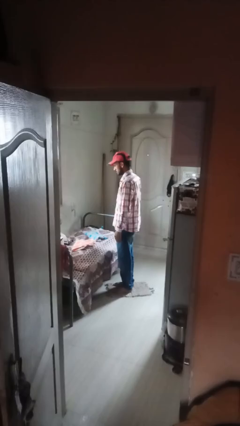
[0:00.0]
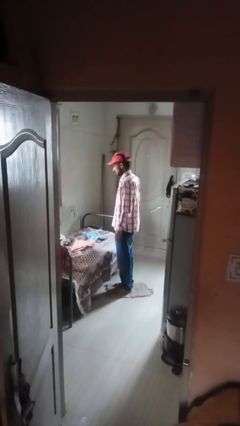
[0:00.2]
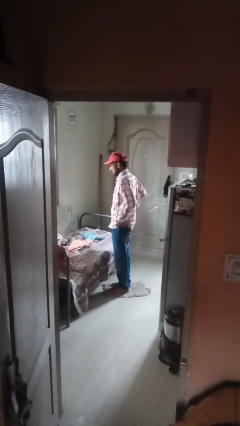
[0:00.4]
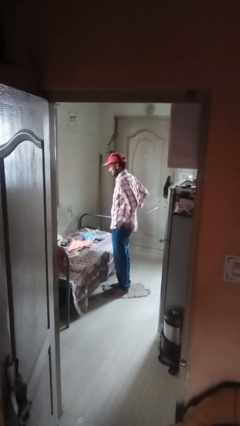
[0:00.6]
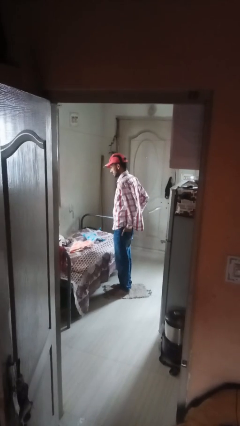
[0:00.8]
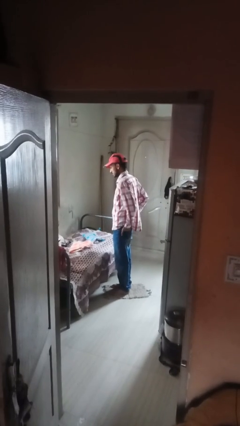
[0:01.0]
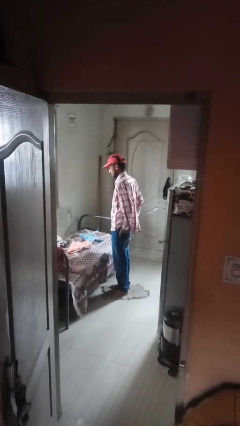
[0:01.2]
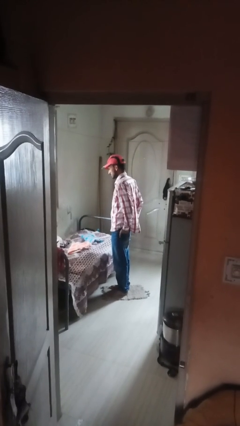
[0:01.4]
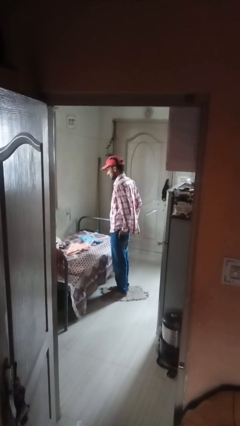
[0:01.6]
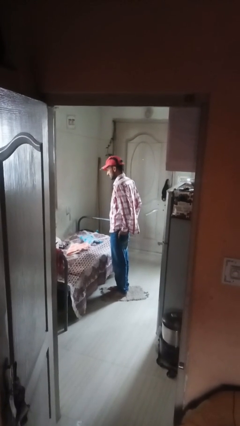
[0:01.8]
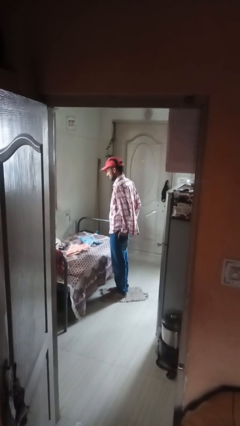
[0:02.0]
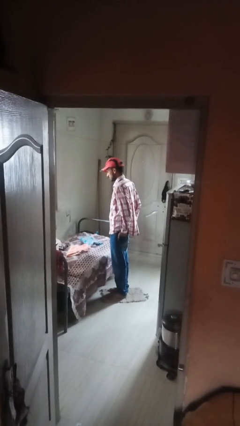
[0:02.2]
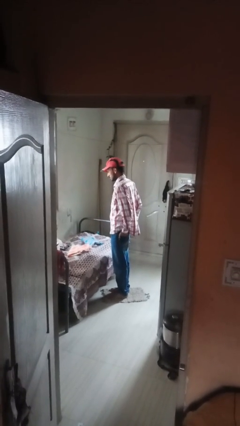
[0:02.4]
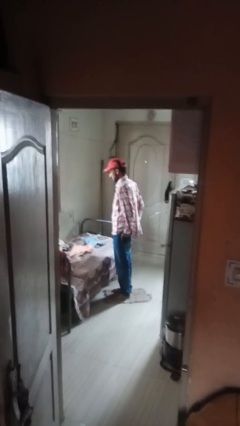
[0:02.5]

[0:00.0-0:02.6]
person puts hands in back pockets

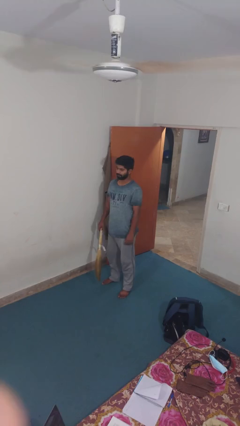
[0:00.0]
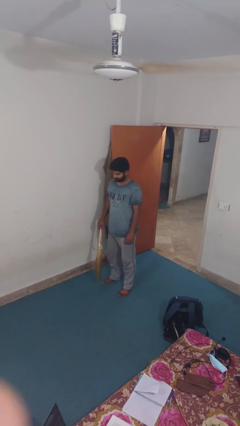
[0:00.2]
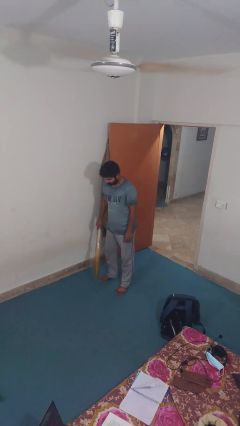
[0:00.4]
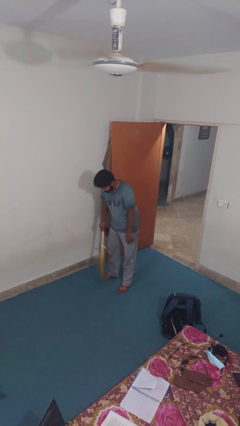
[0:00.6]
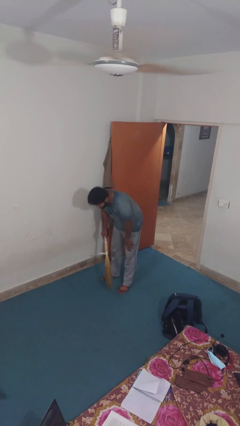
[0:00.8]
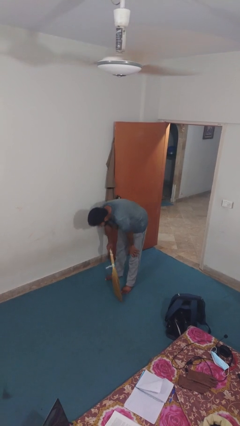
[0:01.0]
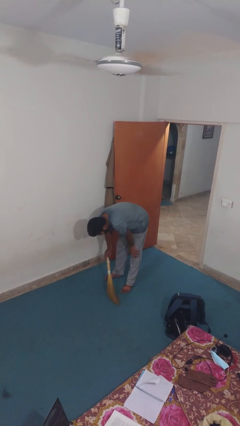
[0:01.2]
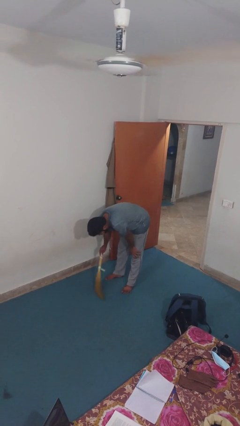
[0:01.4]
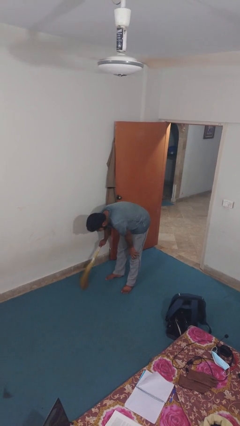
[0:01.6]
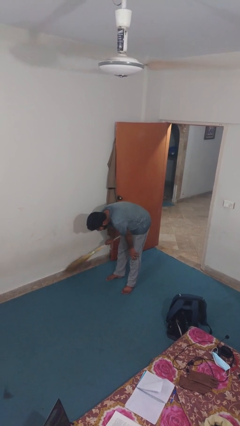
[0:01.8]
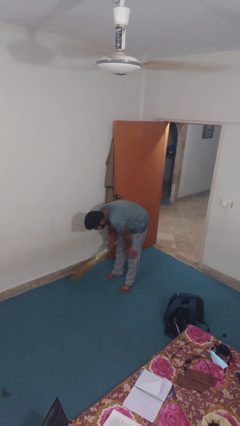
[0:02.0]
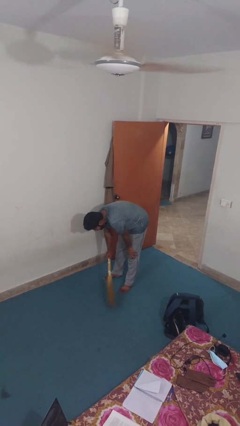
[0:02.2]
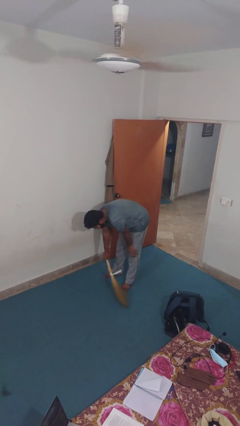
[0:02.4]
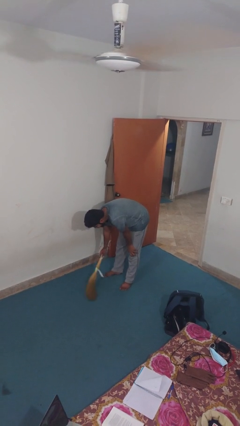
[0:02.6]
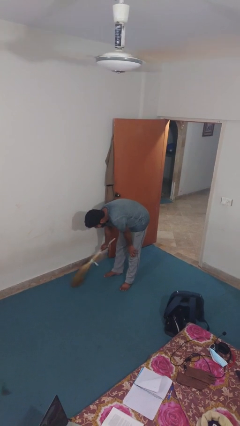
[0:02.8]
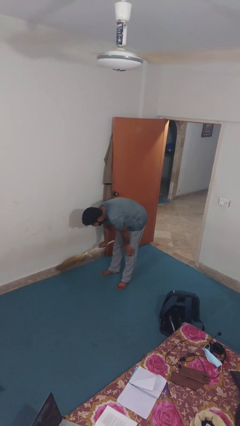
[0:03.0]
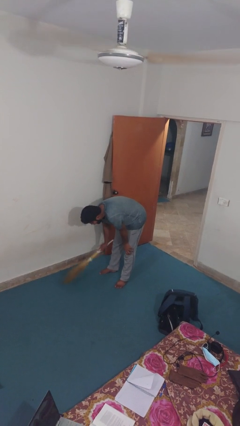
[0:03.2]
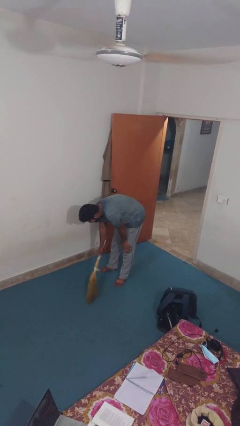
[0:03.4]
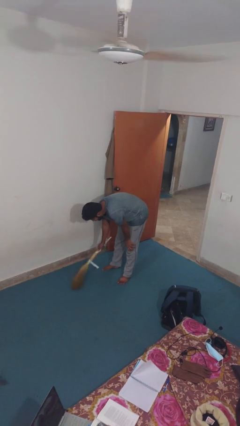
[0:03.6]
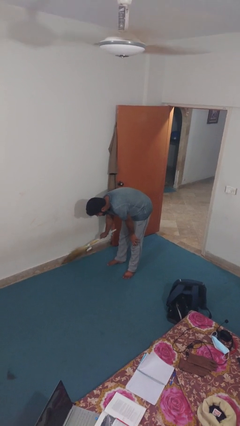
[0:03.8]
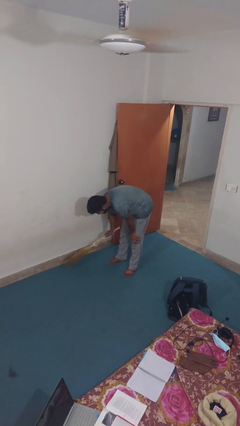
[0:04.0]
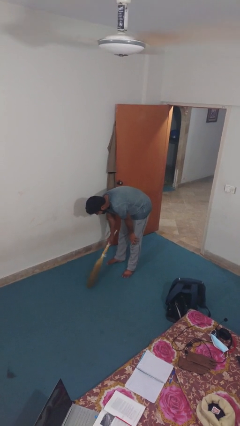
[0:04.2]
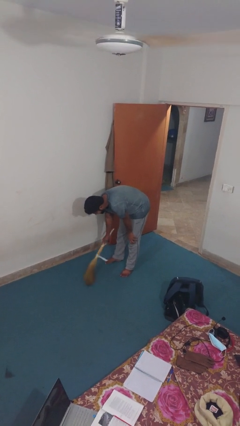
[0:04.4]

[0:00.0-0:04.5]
person sweeps floor

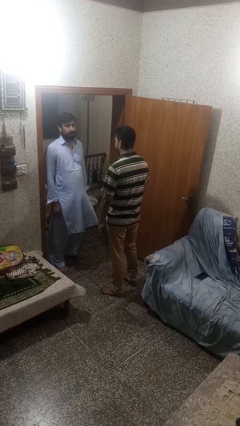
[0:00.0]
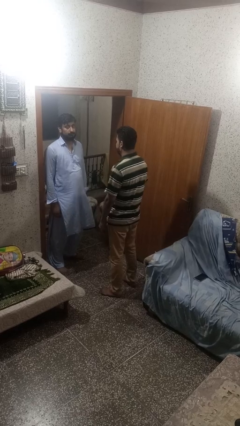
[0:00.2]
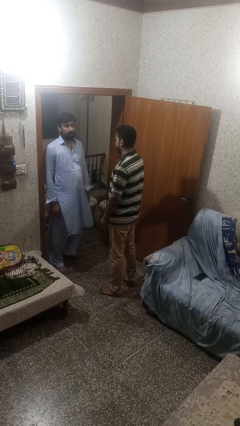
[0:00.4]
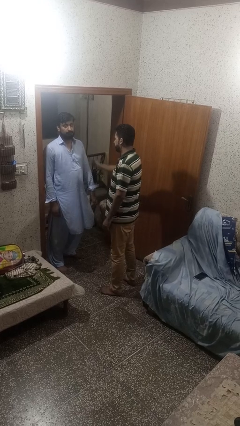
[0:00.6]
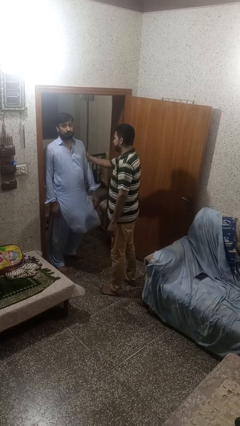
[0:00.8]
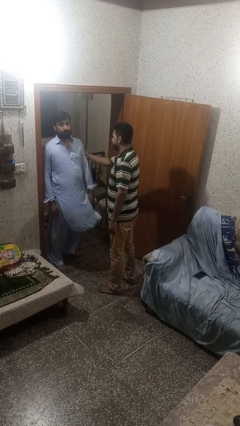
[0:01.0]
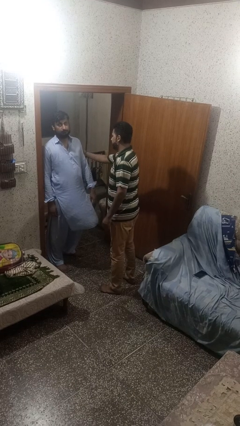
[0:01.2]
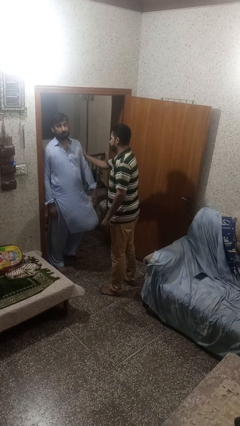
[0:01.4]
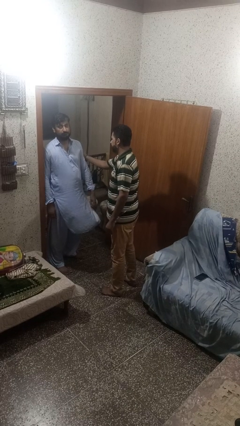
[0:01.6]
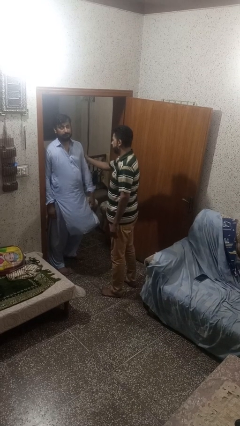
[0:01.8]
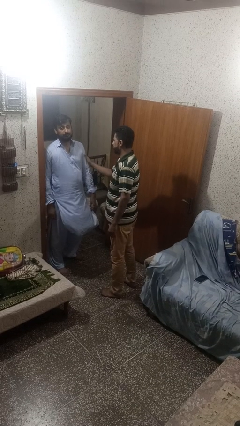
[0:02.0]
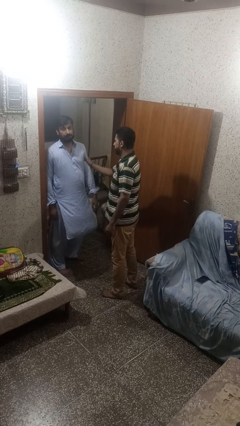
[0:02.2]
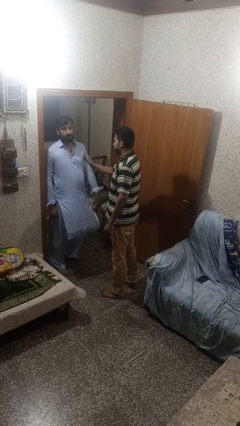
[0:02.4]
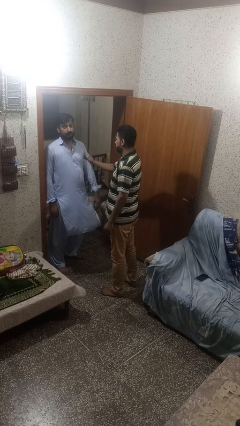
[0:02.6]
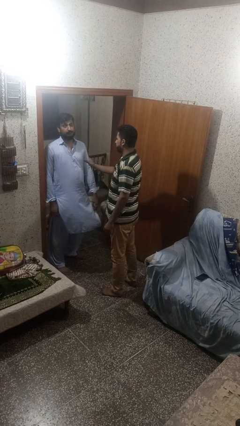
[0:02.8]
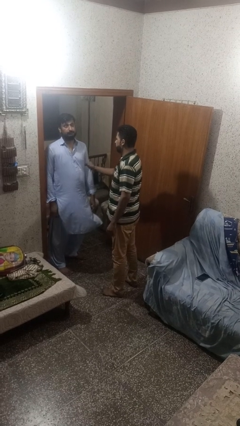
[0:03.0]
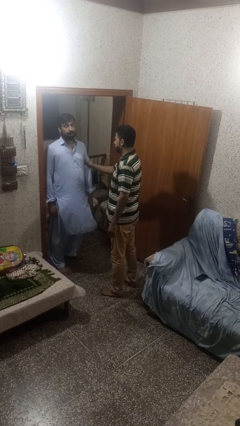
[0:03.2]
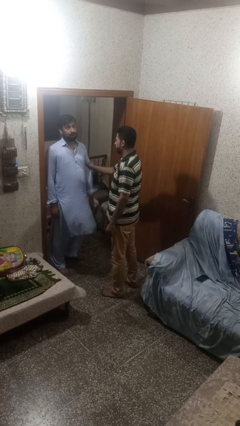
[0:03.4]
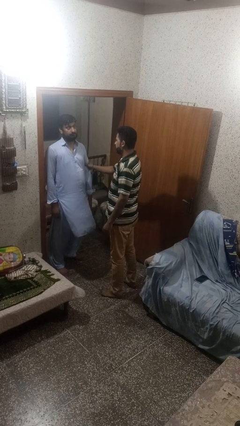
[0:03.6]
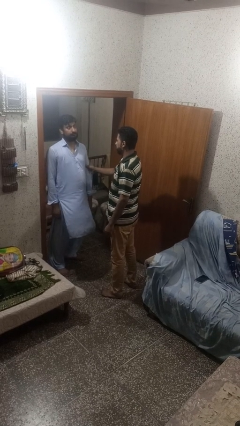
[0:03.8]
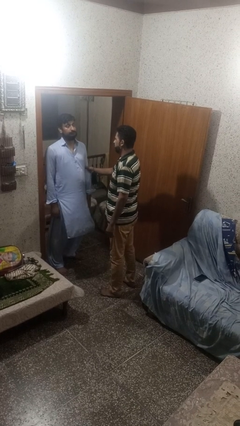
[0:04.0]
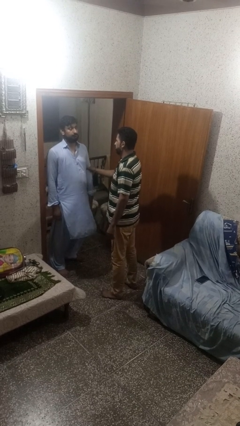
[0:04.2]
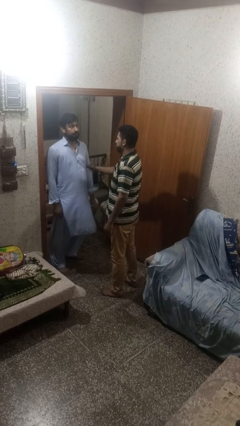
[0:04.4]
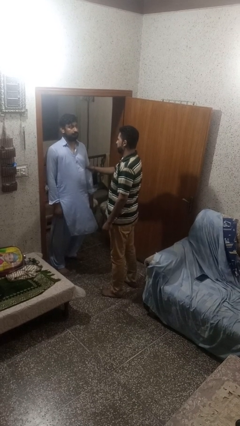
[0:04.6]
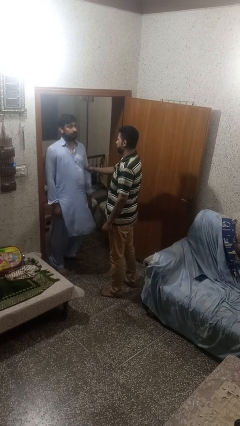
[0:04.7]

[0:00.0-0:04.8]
person grabs person by bicep

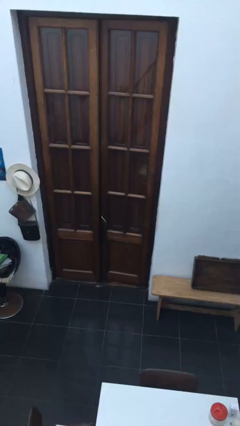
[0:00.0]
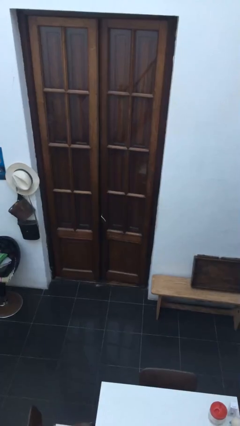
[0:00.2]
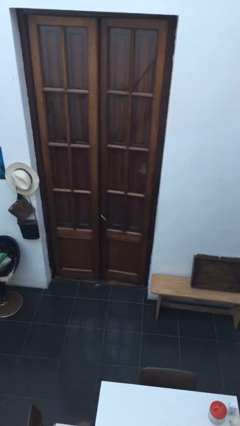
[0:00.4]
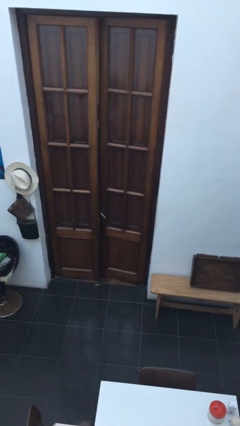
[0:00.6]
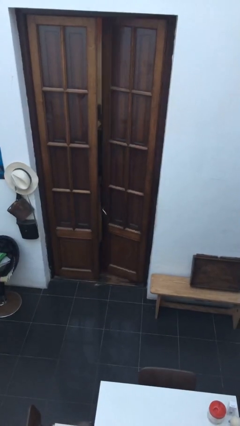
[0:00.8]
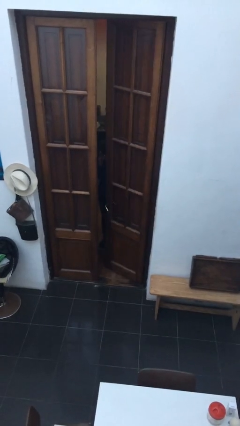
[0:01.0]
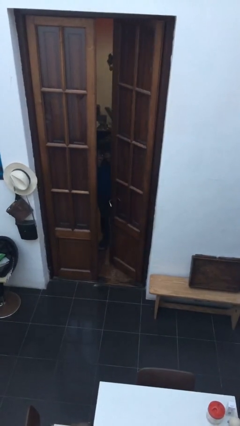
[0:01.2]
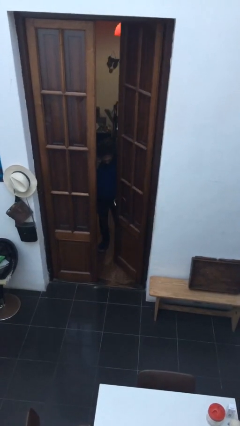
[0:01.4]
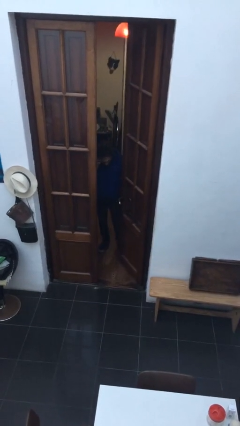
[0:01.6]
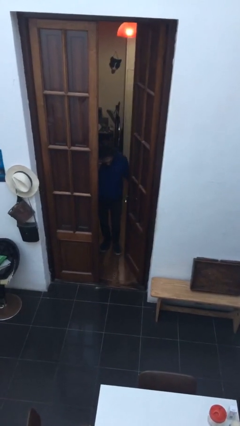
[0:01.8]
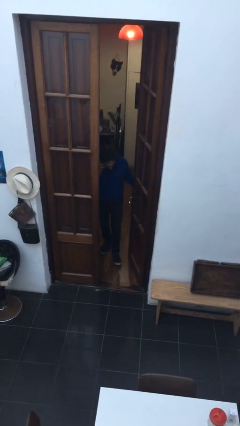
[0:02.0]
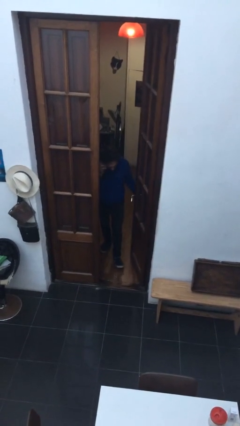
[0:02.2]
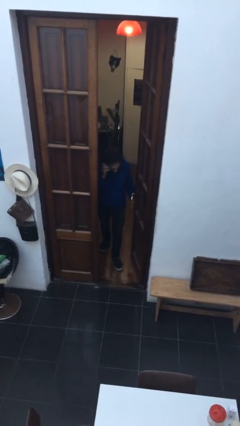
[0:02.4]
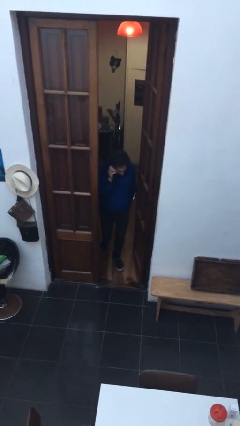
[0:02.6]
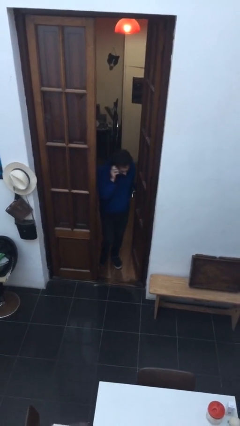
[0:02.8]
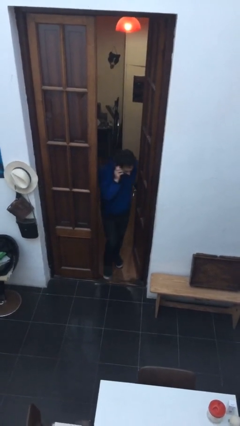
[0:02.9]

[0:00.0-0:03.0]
person opens facility door

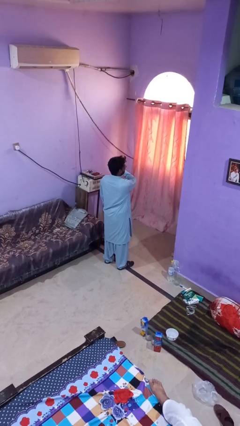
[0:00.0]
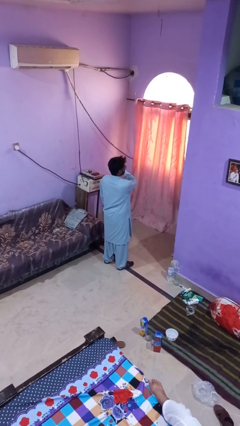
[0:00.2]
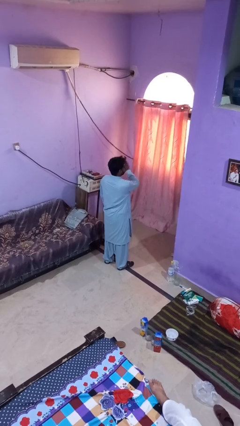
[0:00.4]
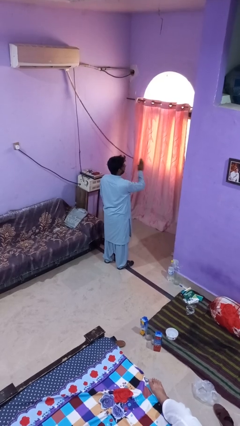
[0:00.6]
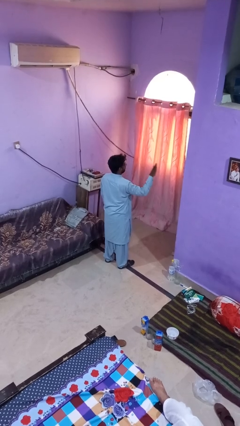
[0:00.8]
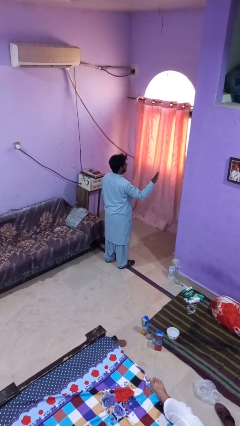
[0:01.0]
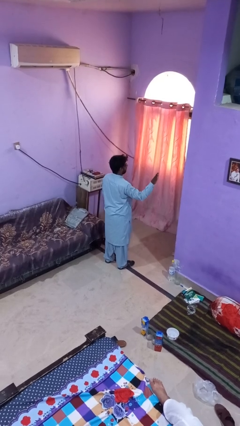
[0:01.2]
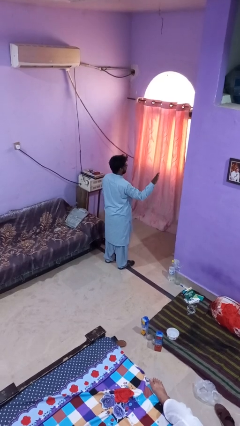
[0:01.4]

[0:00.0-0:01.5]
person gestures swipe right

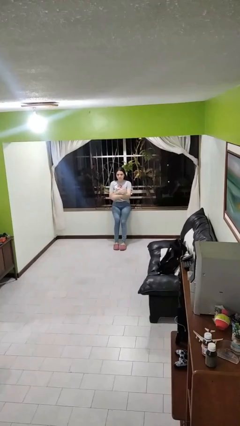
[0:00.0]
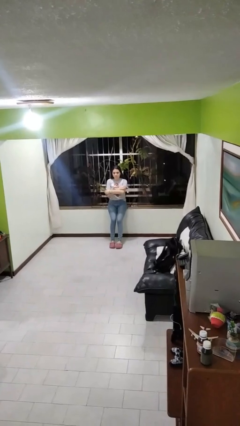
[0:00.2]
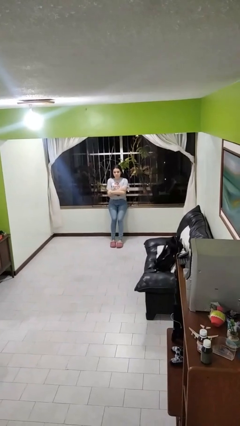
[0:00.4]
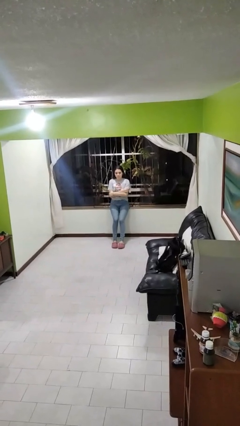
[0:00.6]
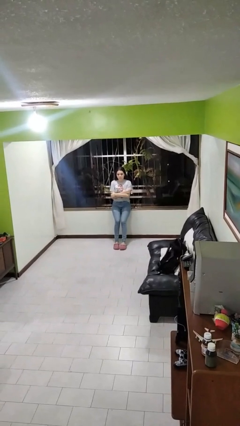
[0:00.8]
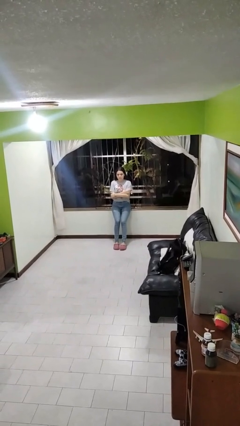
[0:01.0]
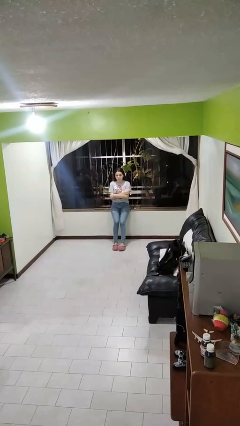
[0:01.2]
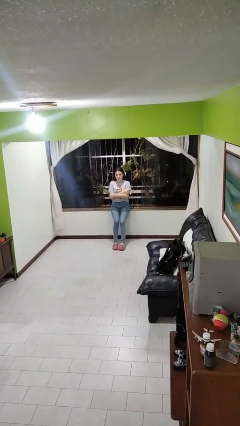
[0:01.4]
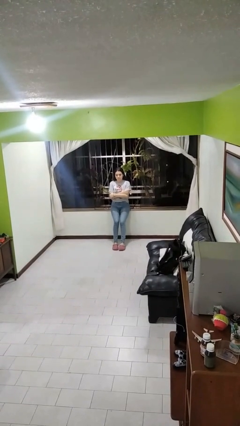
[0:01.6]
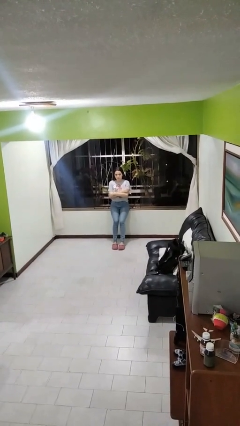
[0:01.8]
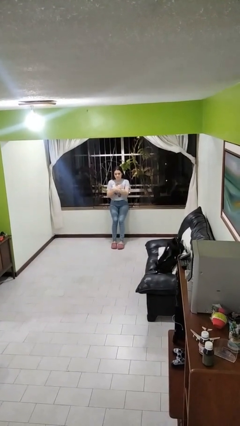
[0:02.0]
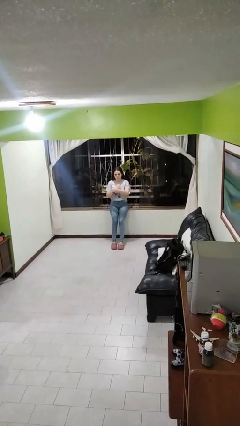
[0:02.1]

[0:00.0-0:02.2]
person crosses arms
